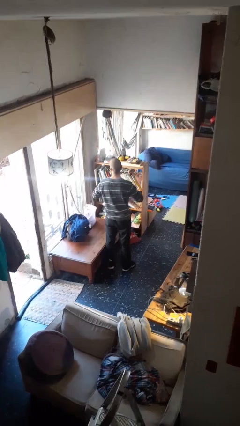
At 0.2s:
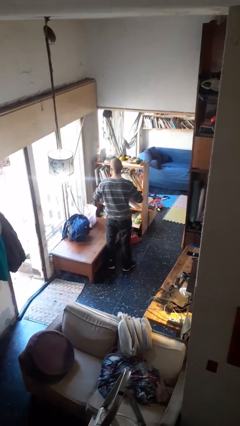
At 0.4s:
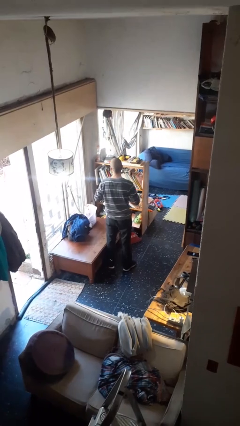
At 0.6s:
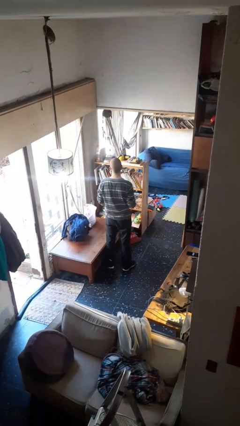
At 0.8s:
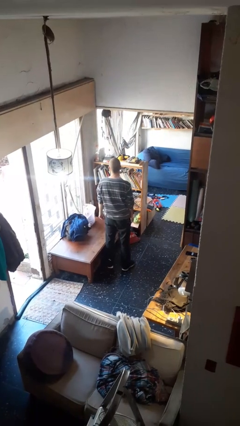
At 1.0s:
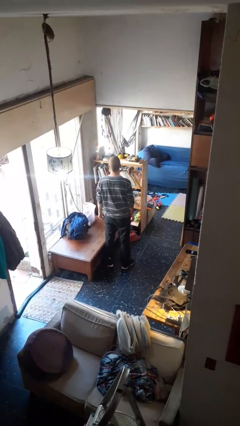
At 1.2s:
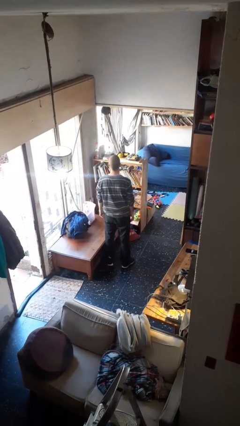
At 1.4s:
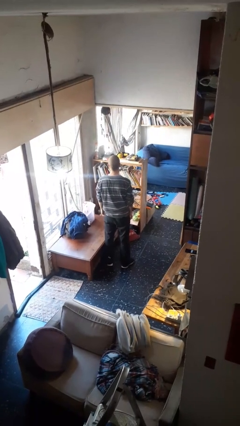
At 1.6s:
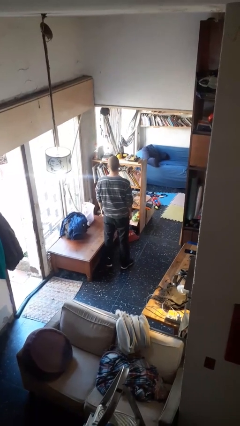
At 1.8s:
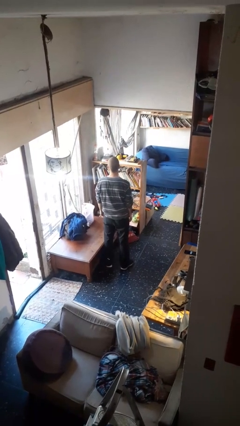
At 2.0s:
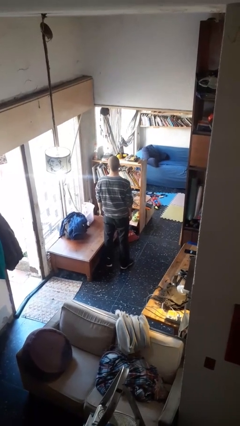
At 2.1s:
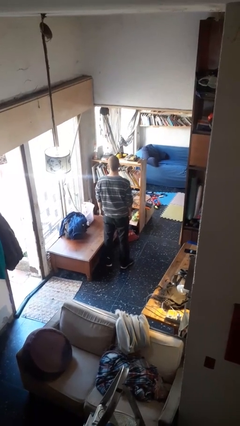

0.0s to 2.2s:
person takes off ring

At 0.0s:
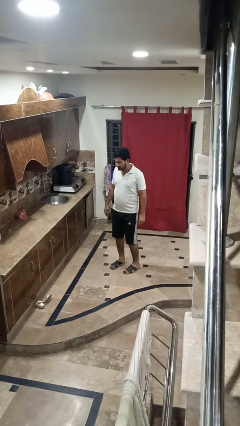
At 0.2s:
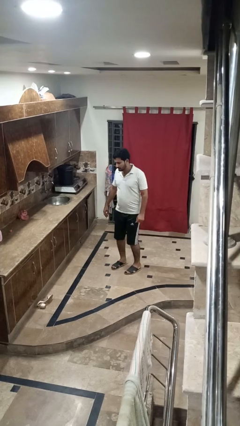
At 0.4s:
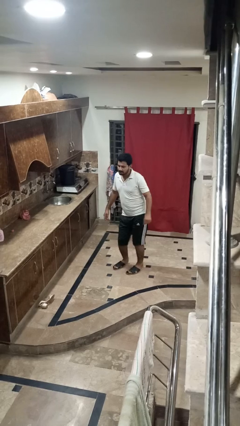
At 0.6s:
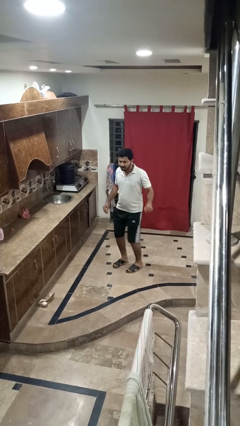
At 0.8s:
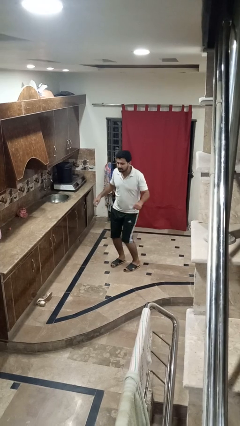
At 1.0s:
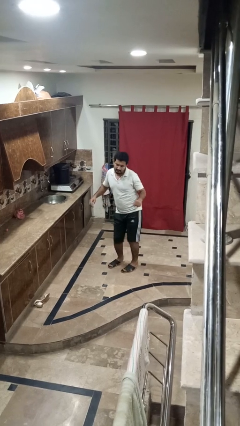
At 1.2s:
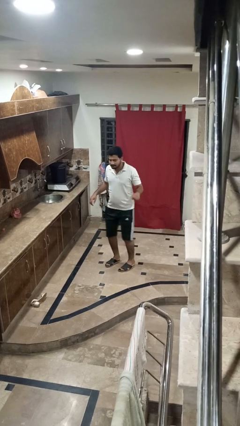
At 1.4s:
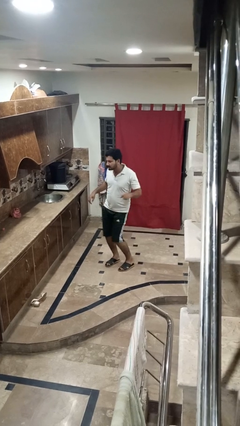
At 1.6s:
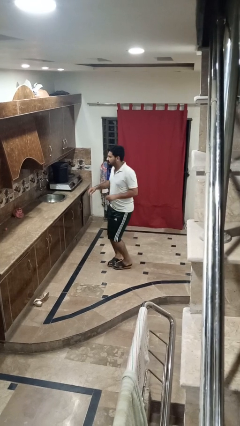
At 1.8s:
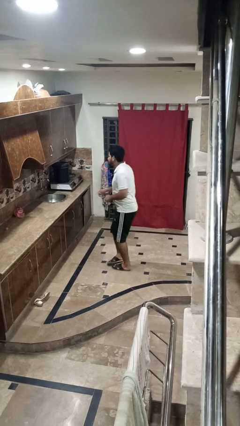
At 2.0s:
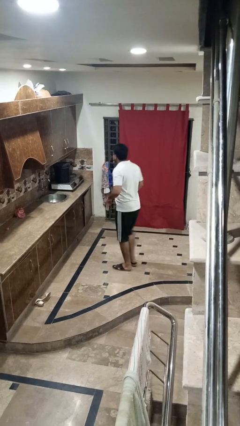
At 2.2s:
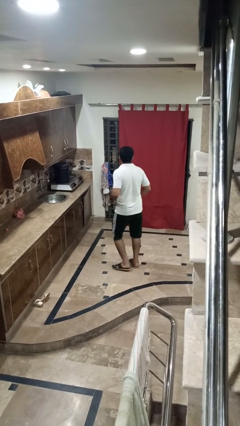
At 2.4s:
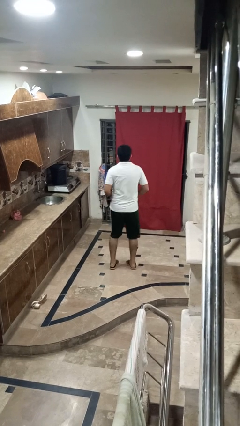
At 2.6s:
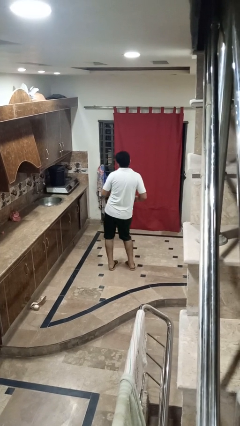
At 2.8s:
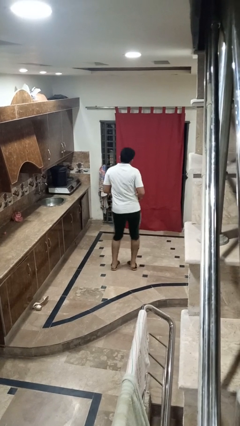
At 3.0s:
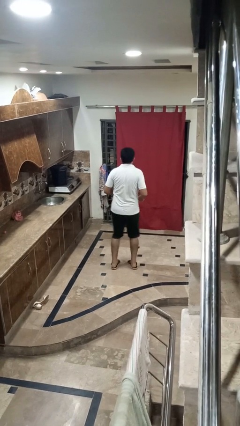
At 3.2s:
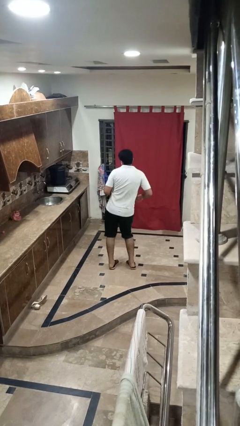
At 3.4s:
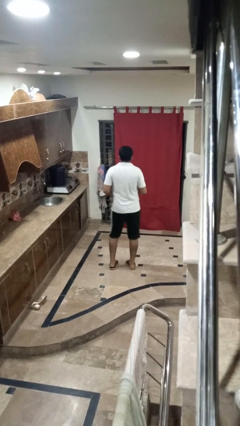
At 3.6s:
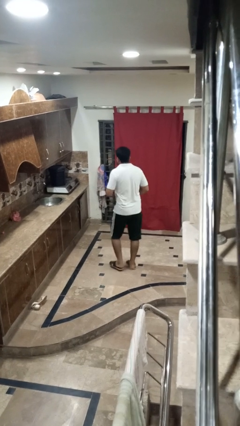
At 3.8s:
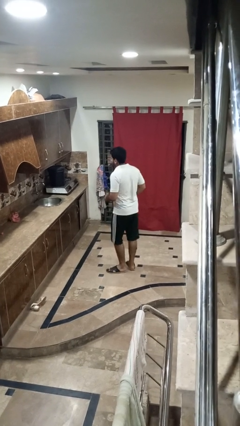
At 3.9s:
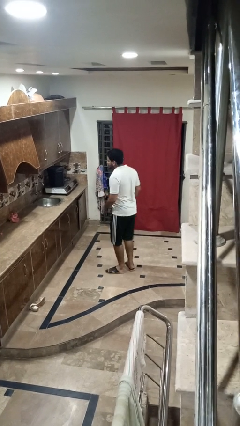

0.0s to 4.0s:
person wiggles hips

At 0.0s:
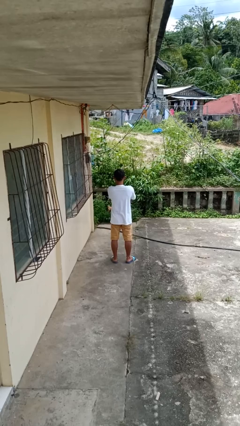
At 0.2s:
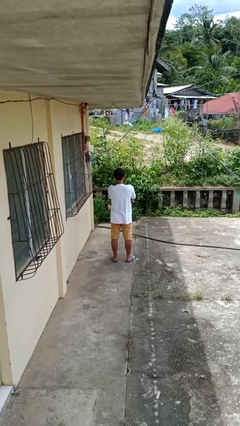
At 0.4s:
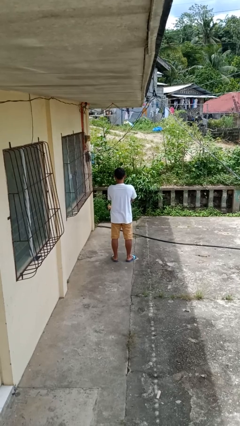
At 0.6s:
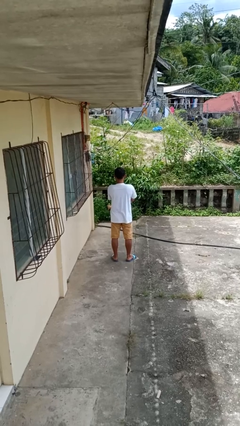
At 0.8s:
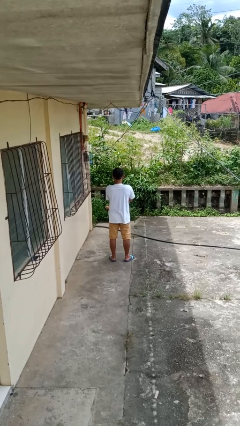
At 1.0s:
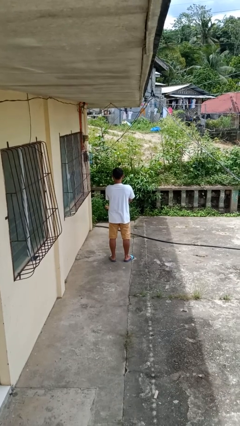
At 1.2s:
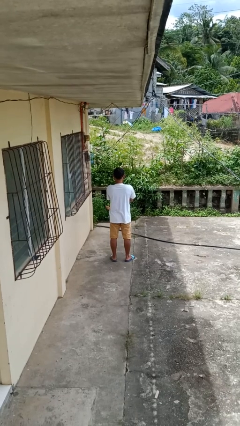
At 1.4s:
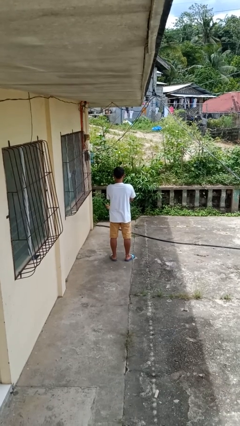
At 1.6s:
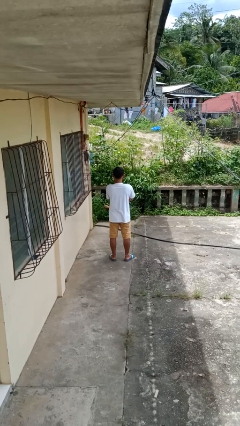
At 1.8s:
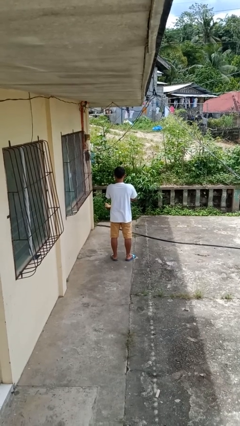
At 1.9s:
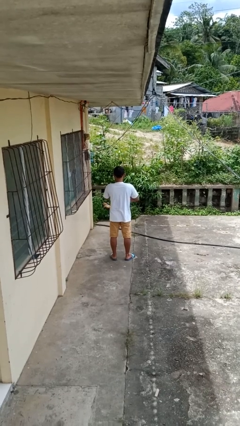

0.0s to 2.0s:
person crosses arms

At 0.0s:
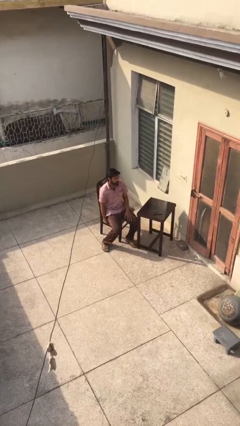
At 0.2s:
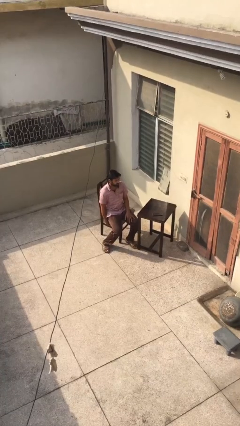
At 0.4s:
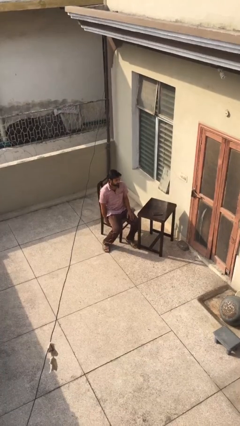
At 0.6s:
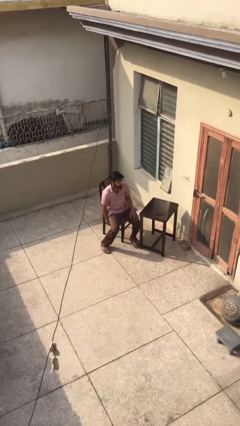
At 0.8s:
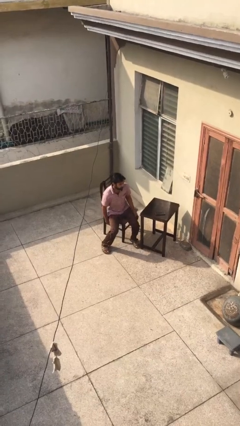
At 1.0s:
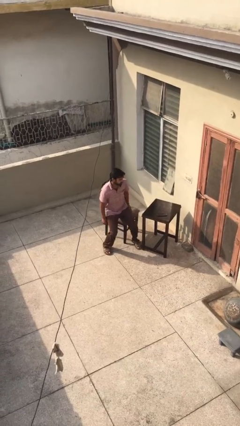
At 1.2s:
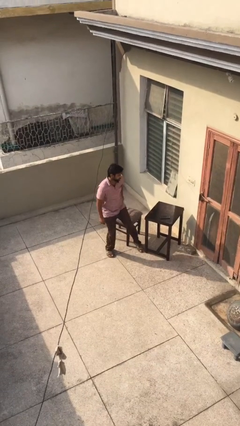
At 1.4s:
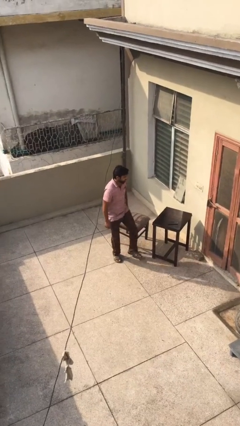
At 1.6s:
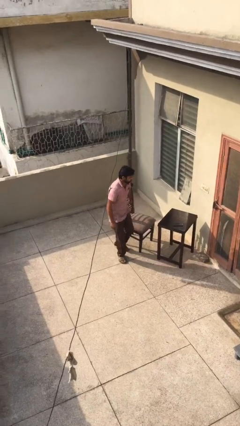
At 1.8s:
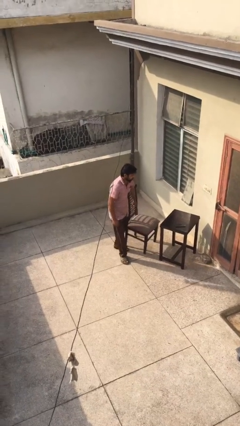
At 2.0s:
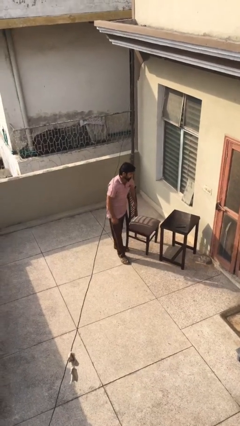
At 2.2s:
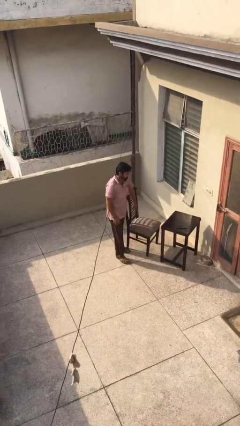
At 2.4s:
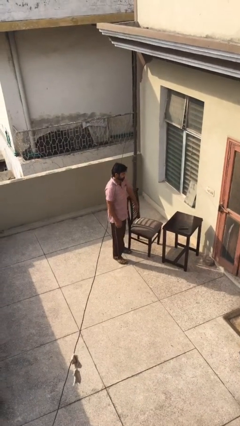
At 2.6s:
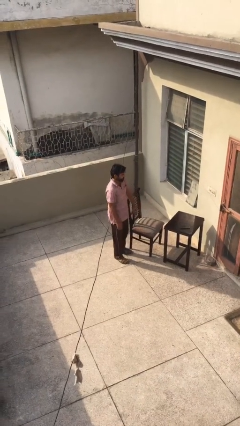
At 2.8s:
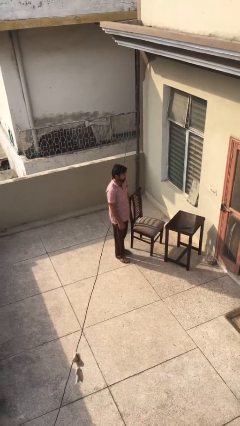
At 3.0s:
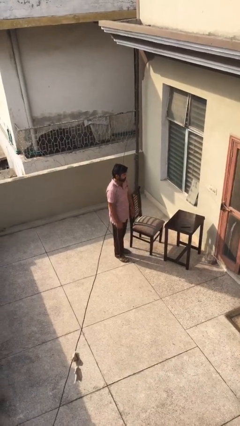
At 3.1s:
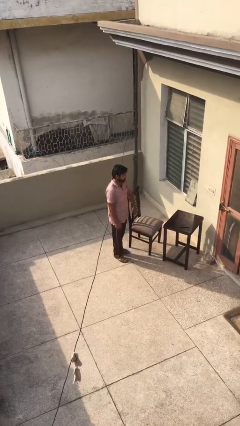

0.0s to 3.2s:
person stands up

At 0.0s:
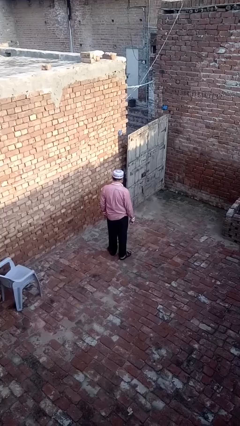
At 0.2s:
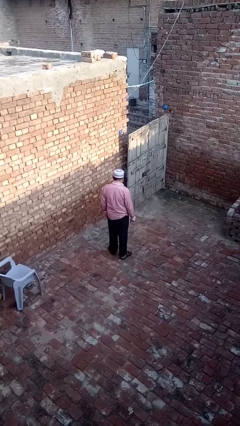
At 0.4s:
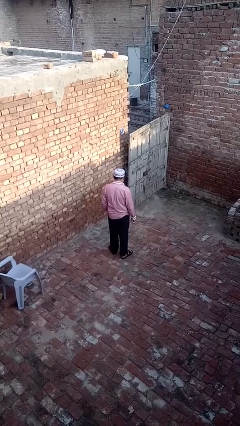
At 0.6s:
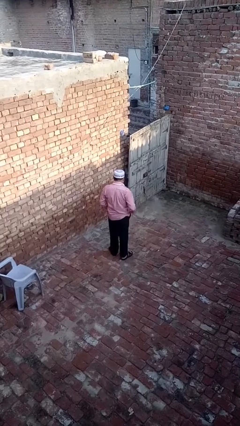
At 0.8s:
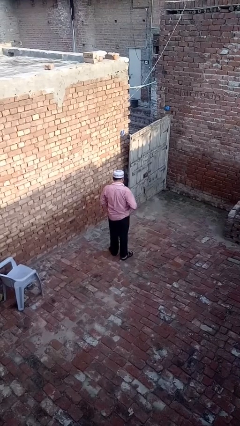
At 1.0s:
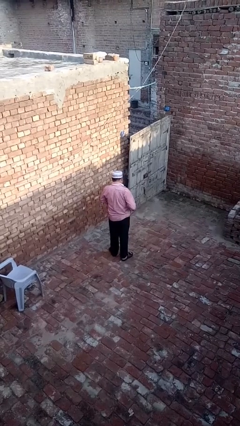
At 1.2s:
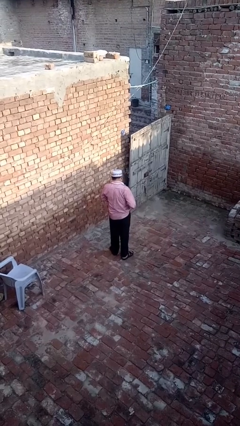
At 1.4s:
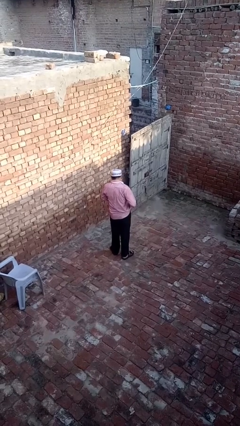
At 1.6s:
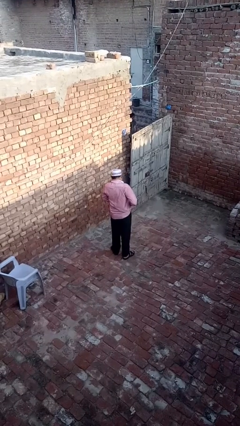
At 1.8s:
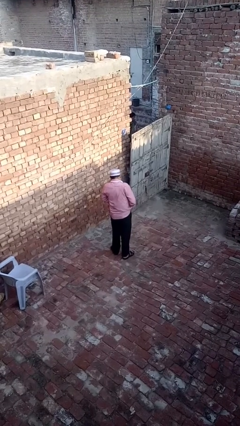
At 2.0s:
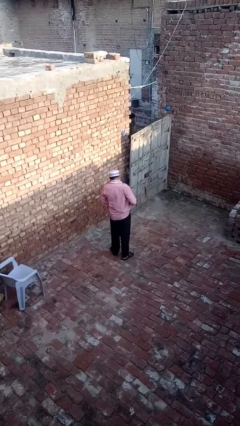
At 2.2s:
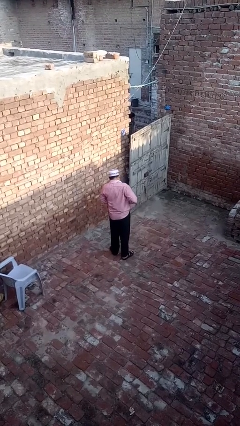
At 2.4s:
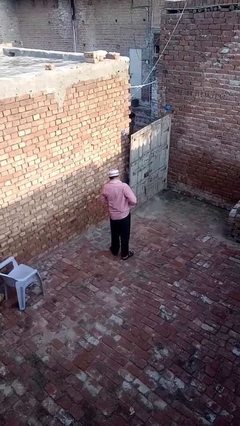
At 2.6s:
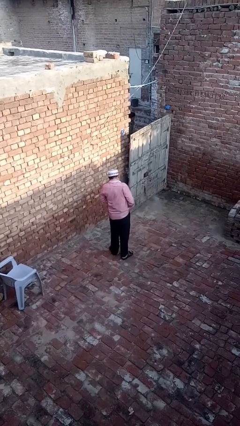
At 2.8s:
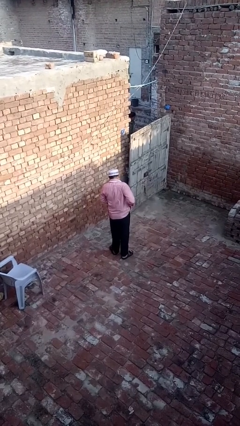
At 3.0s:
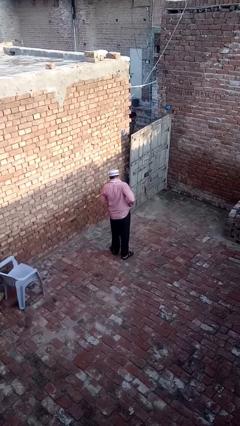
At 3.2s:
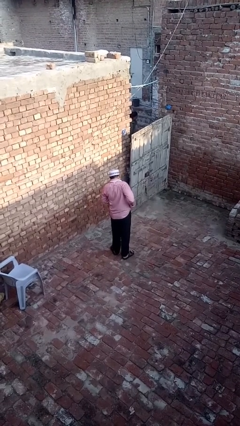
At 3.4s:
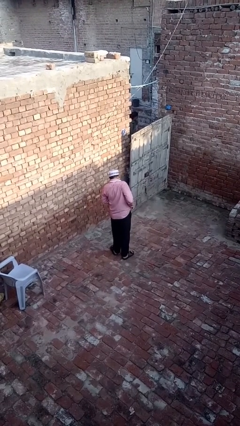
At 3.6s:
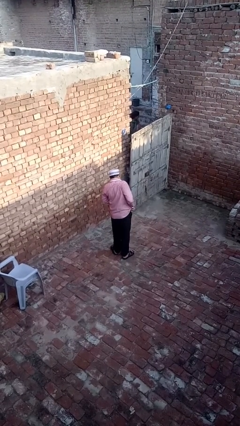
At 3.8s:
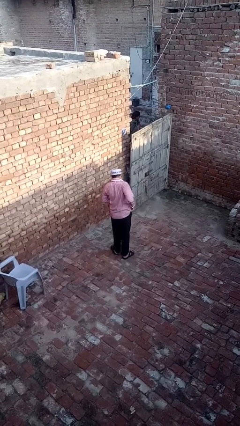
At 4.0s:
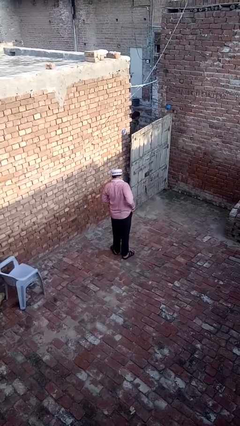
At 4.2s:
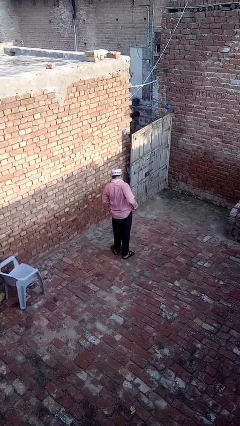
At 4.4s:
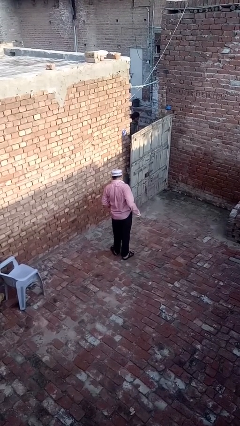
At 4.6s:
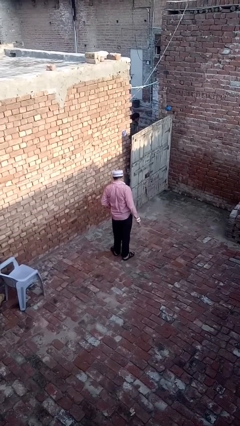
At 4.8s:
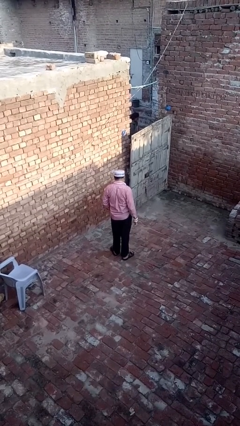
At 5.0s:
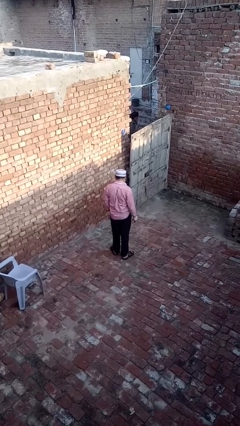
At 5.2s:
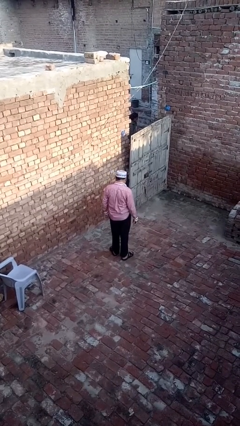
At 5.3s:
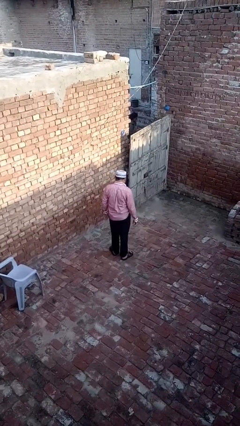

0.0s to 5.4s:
person tucks in shirt

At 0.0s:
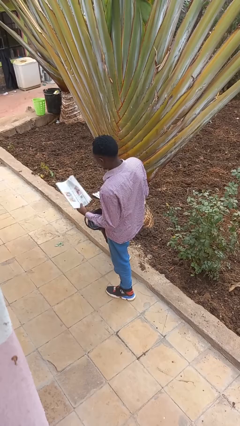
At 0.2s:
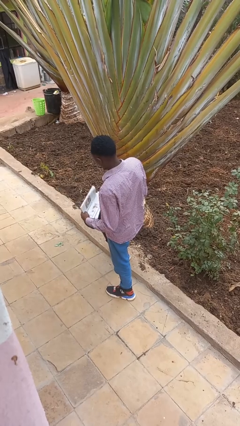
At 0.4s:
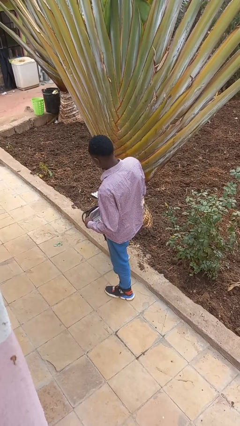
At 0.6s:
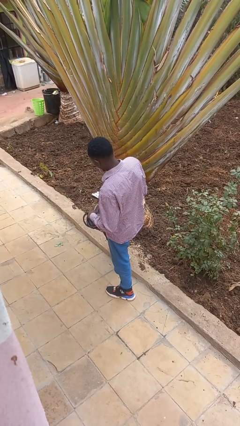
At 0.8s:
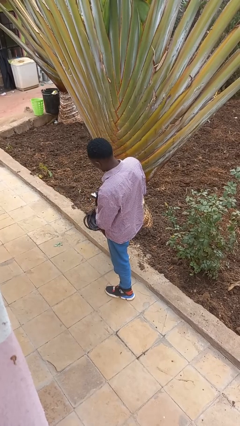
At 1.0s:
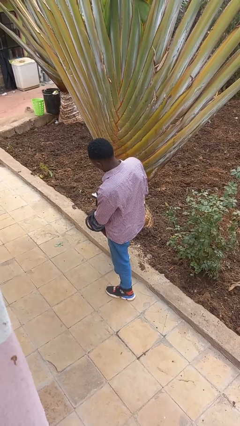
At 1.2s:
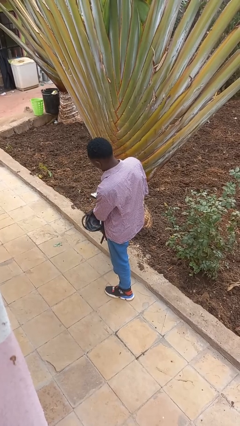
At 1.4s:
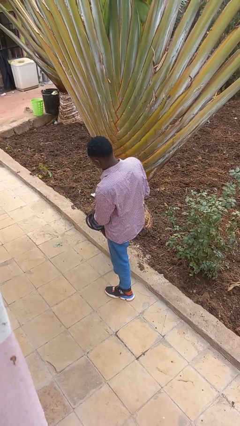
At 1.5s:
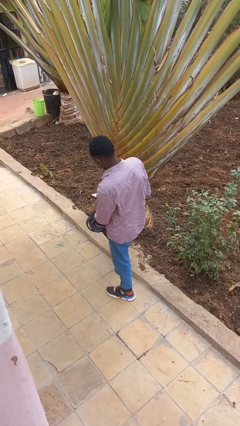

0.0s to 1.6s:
person puts object into backpack
